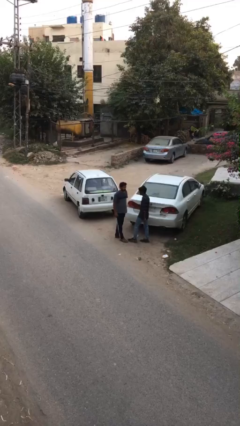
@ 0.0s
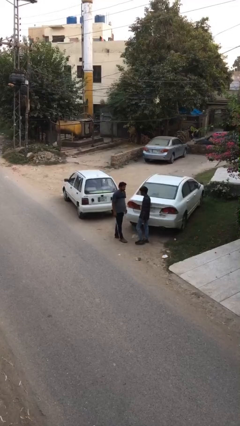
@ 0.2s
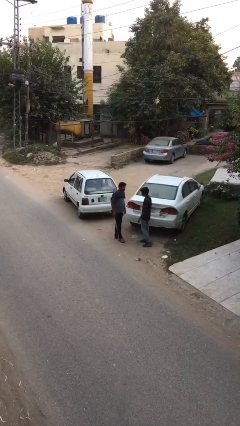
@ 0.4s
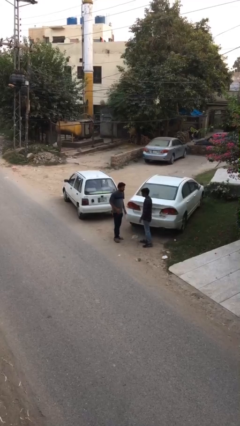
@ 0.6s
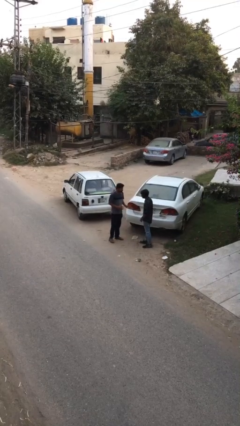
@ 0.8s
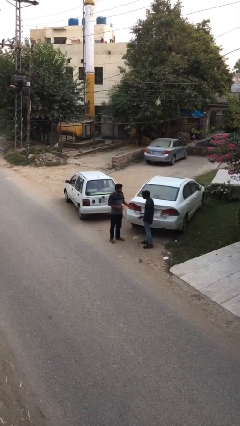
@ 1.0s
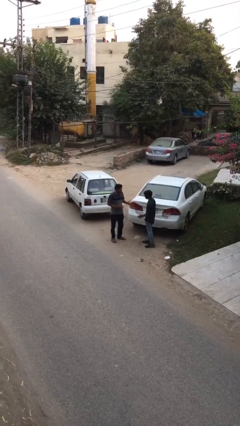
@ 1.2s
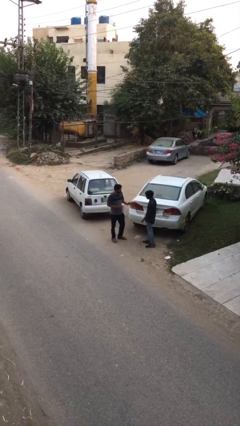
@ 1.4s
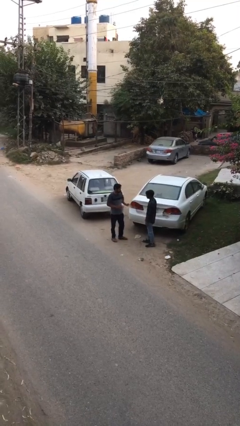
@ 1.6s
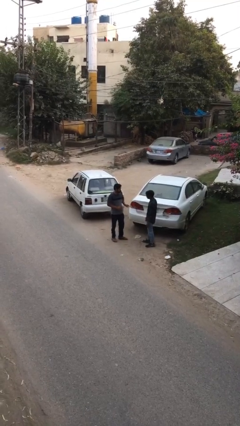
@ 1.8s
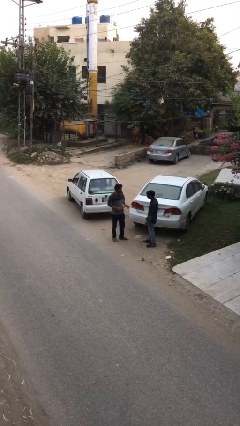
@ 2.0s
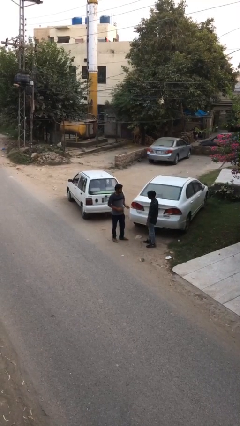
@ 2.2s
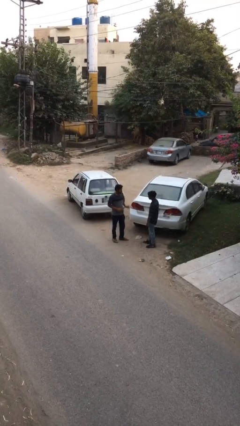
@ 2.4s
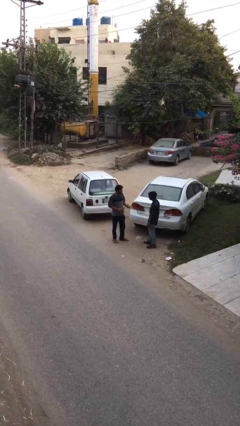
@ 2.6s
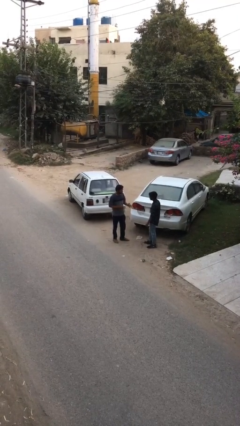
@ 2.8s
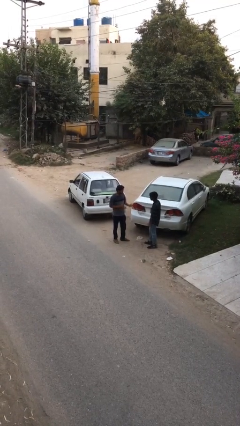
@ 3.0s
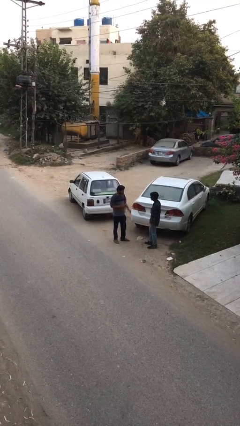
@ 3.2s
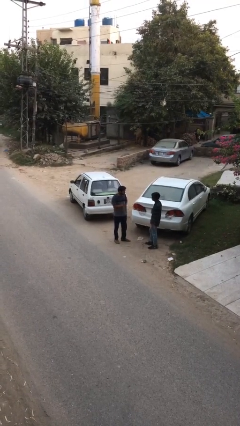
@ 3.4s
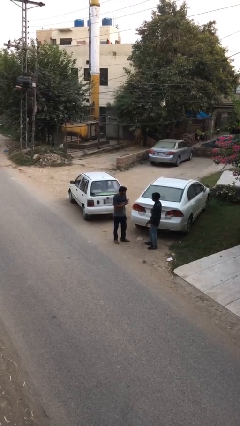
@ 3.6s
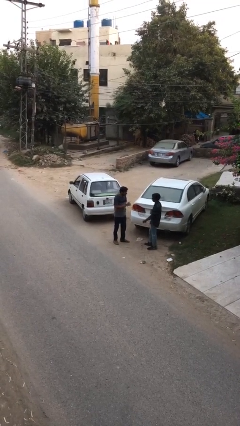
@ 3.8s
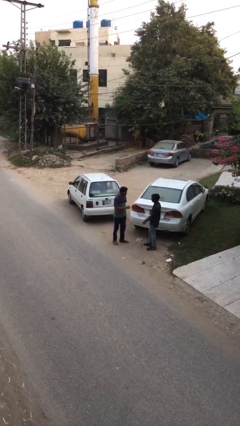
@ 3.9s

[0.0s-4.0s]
person talks to person

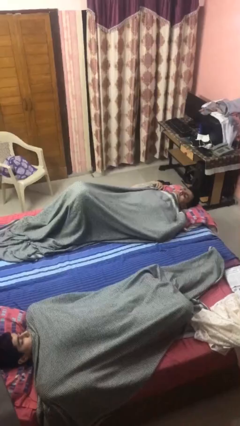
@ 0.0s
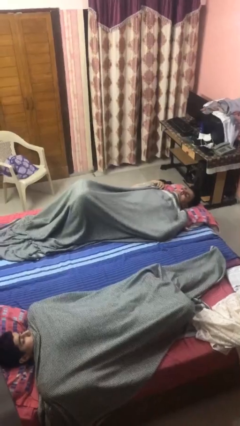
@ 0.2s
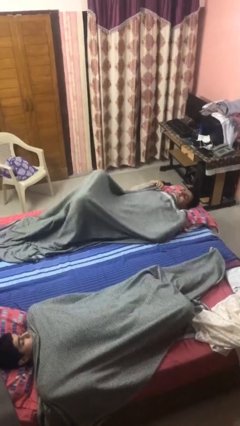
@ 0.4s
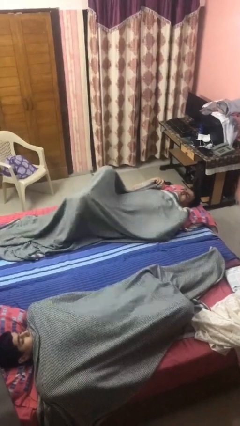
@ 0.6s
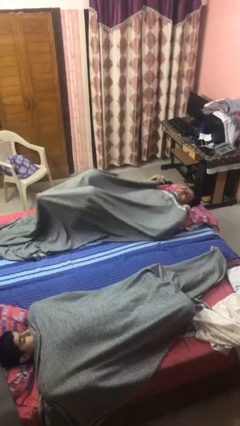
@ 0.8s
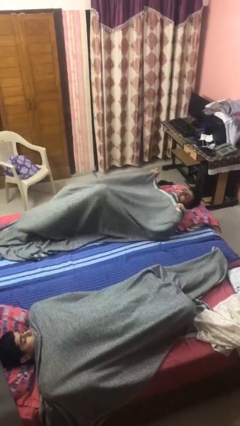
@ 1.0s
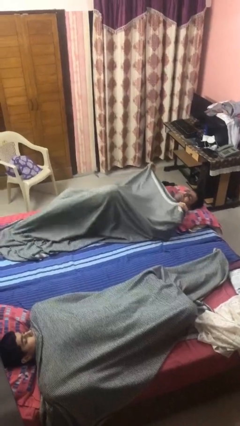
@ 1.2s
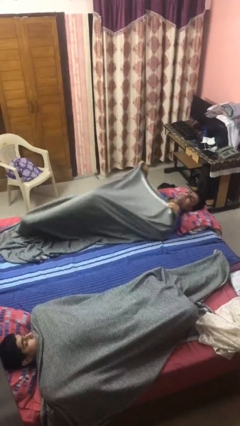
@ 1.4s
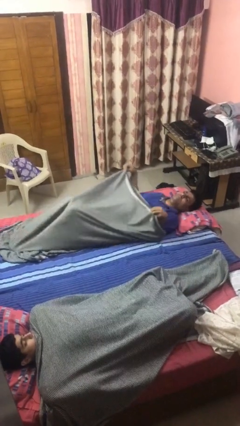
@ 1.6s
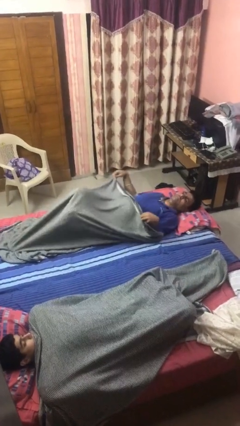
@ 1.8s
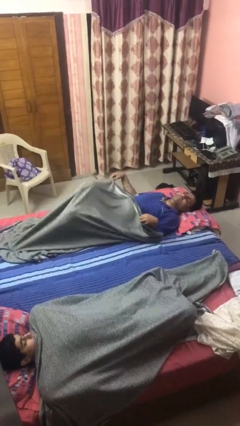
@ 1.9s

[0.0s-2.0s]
person uncovers with bedsheets

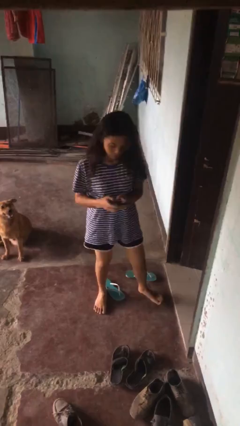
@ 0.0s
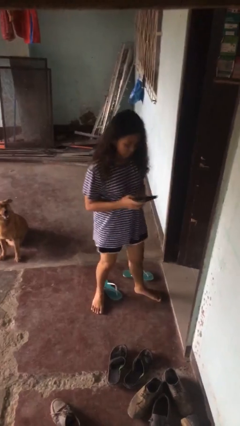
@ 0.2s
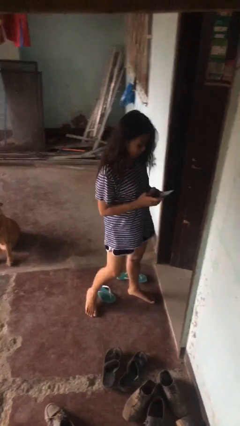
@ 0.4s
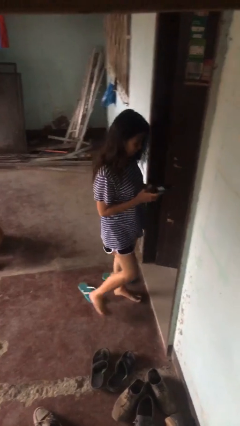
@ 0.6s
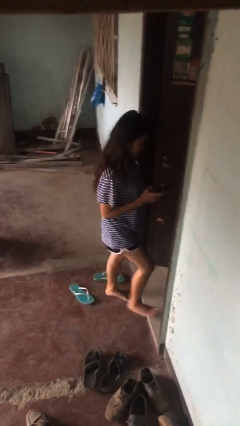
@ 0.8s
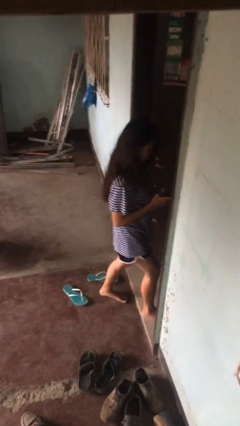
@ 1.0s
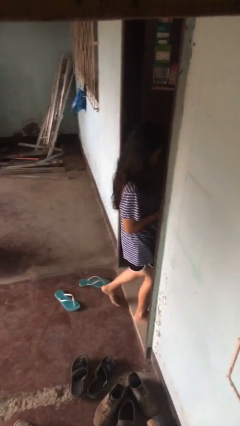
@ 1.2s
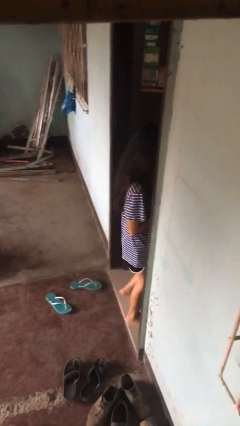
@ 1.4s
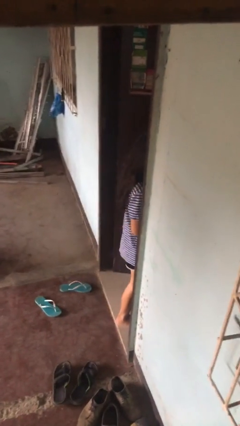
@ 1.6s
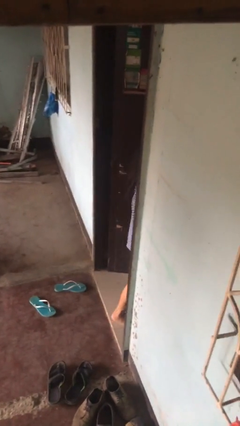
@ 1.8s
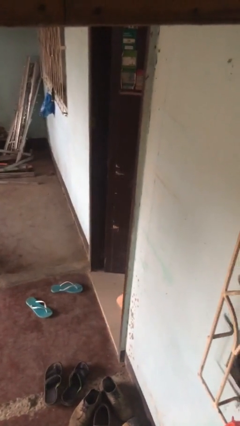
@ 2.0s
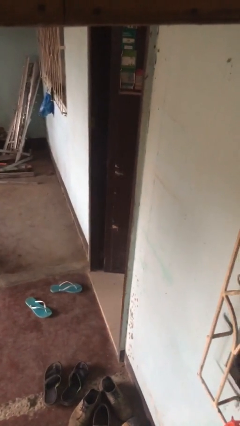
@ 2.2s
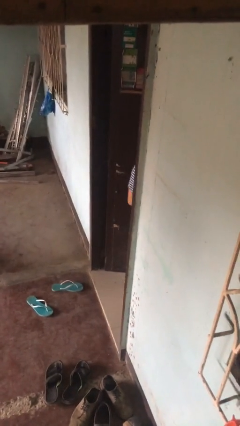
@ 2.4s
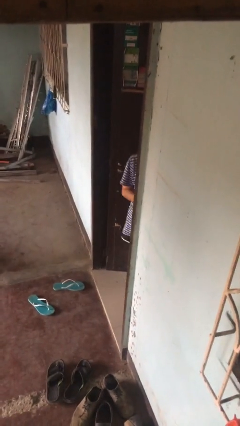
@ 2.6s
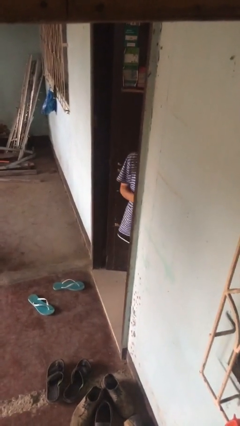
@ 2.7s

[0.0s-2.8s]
person enters scene through structure

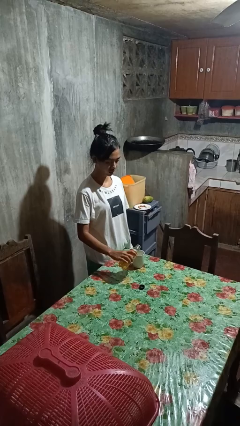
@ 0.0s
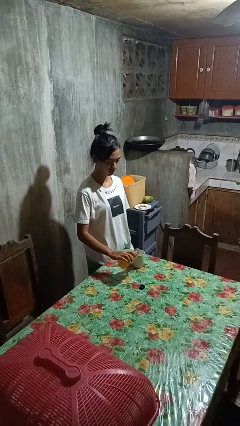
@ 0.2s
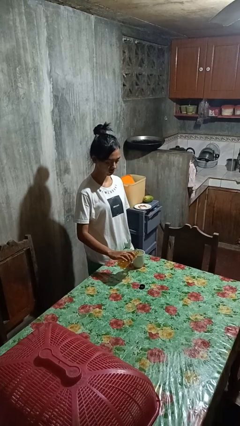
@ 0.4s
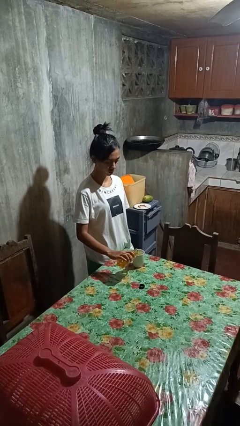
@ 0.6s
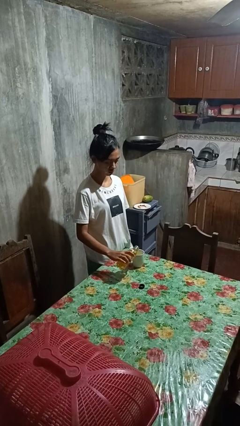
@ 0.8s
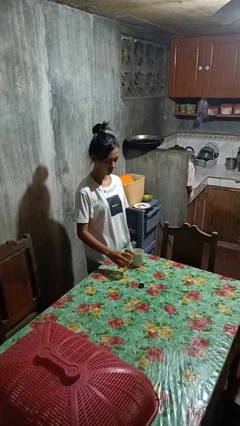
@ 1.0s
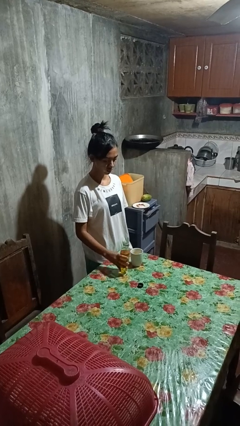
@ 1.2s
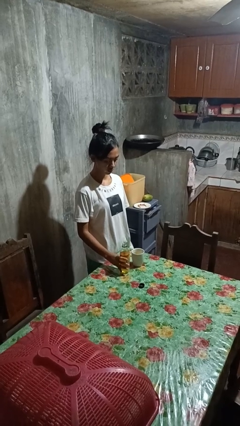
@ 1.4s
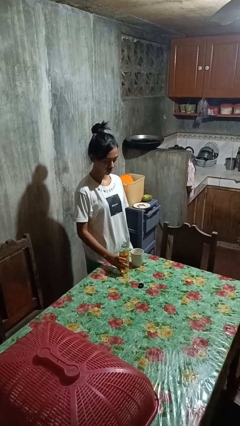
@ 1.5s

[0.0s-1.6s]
person pours liquid into cup

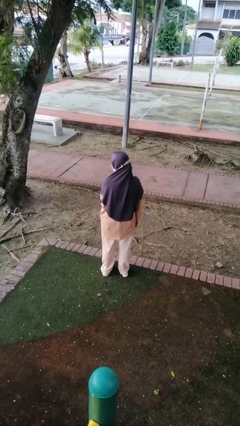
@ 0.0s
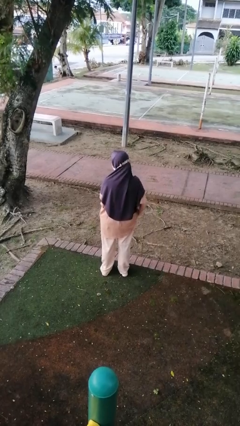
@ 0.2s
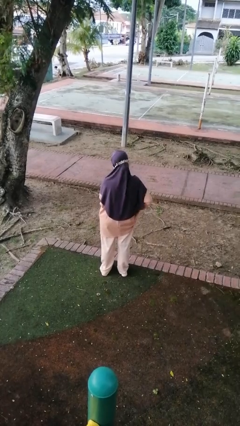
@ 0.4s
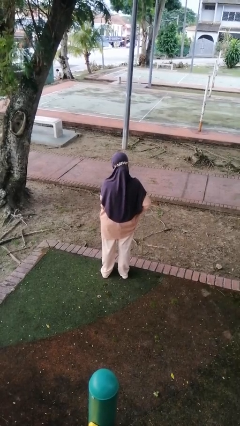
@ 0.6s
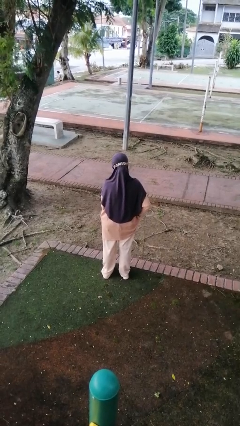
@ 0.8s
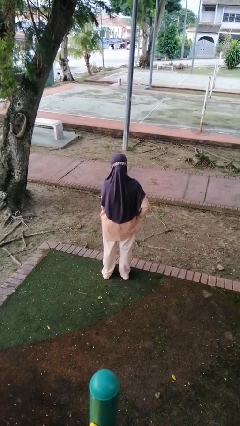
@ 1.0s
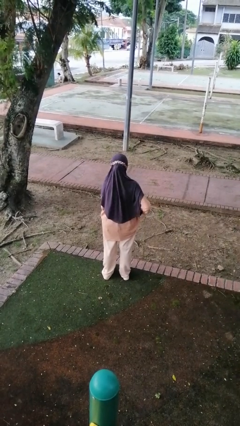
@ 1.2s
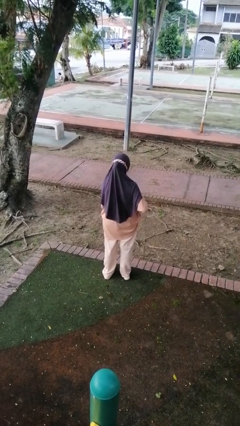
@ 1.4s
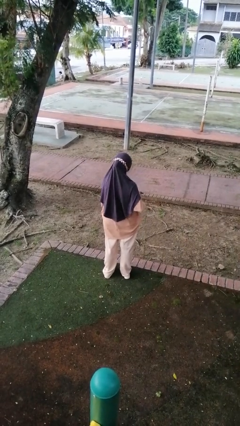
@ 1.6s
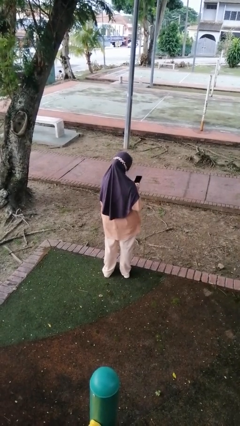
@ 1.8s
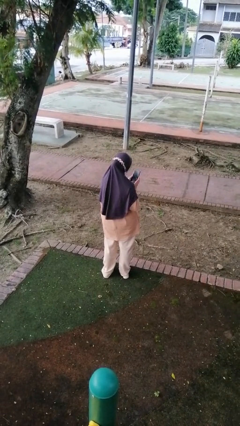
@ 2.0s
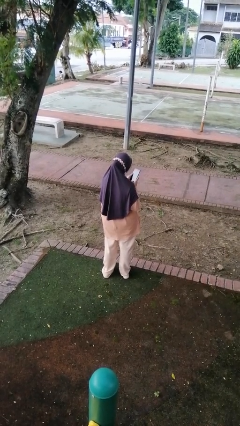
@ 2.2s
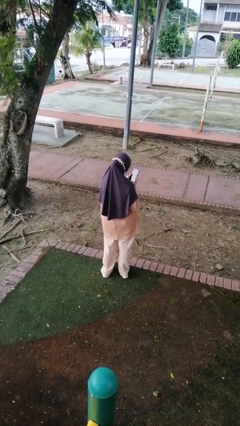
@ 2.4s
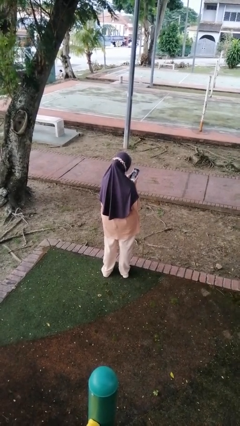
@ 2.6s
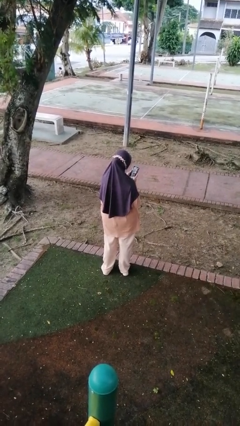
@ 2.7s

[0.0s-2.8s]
person takes phone from pocket

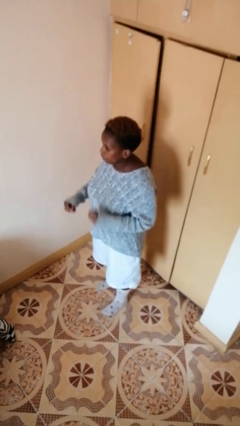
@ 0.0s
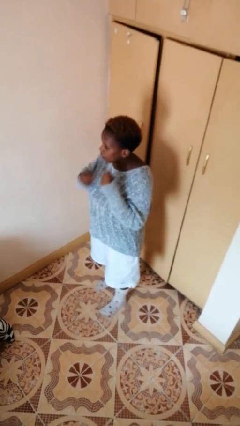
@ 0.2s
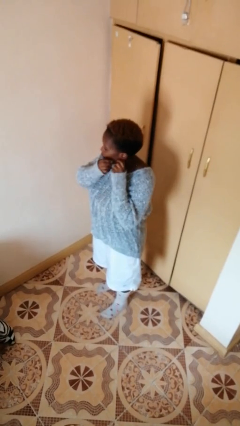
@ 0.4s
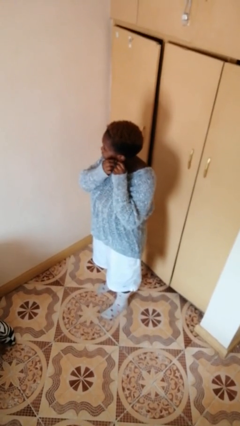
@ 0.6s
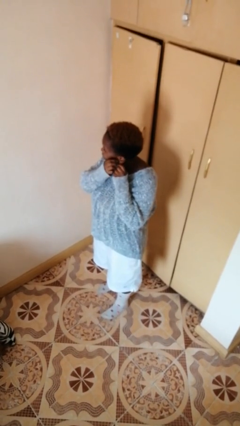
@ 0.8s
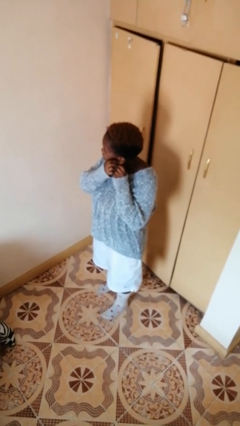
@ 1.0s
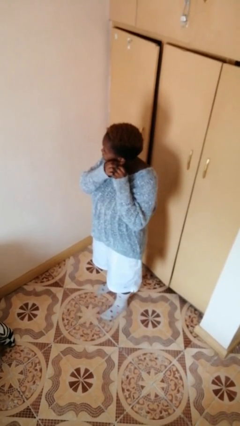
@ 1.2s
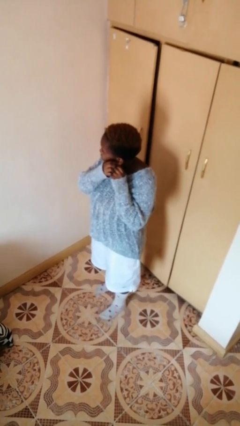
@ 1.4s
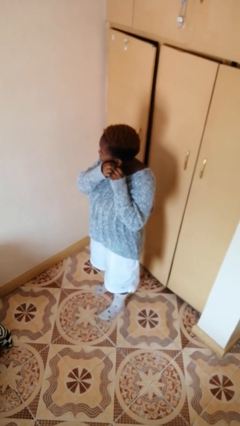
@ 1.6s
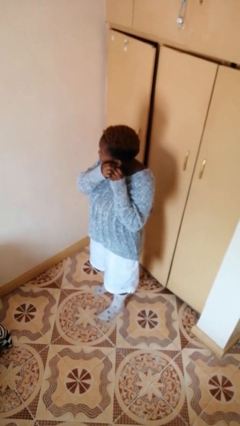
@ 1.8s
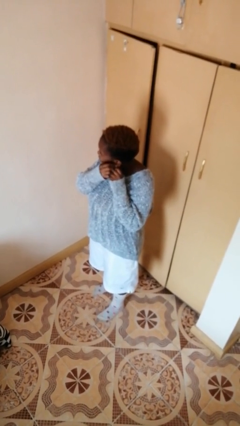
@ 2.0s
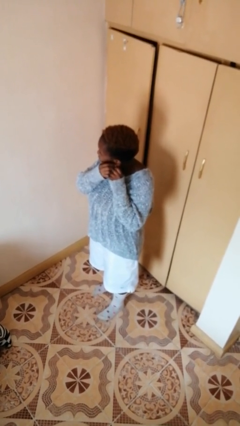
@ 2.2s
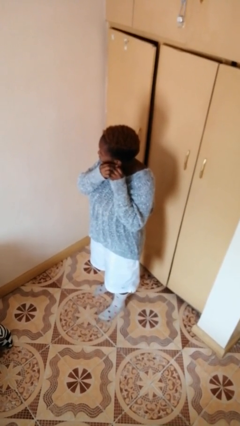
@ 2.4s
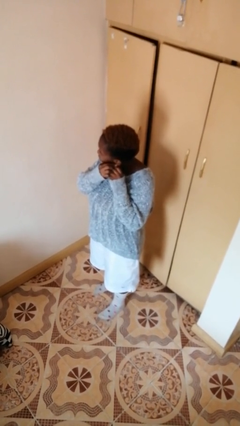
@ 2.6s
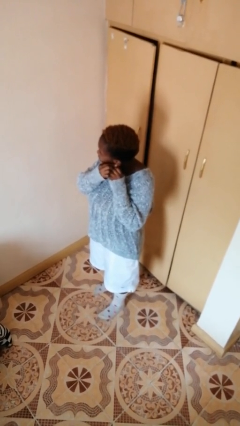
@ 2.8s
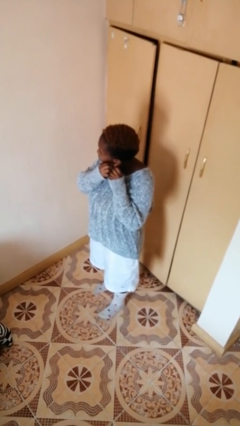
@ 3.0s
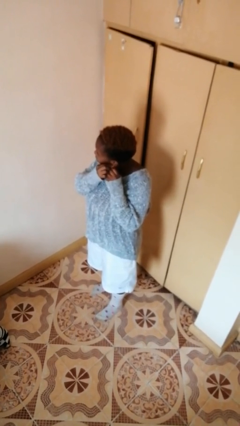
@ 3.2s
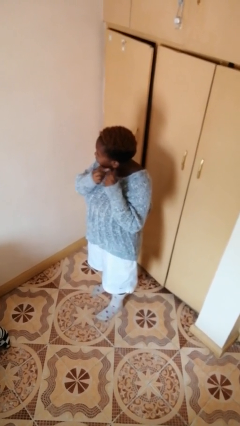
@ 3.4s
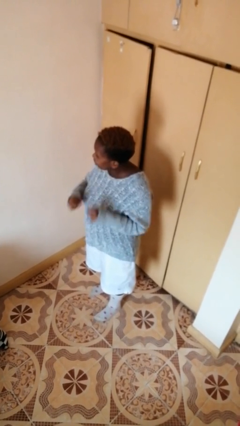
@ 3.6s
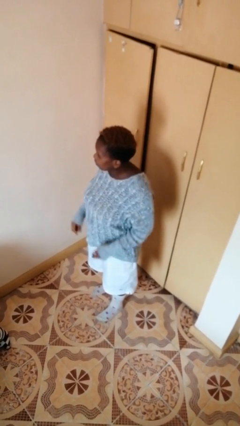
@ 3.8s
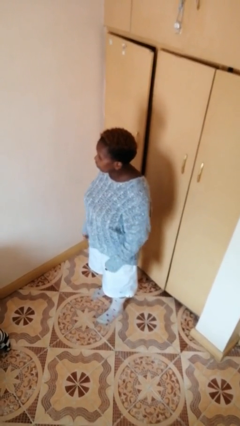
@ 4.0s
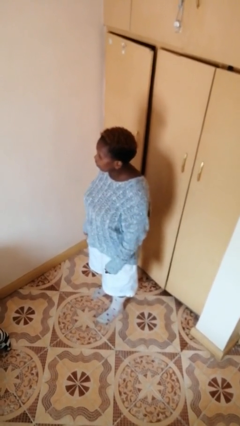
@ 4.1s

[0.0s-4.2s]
person puts on earrings

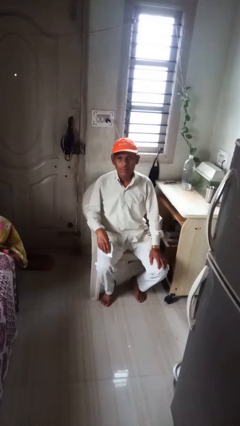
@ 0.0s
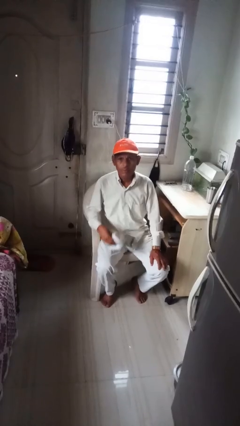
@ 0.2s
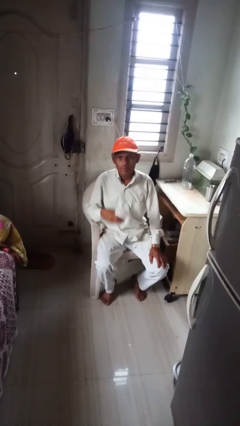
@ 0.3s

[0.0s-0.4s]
person wipes mouth with napkin
